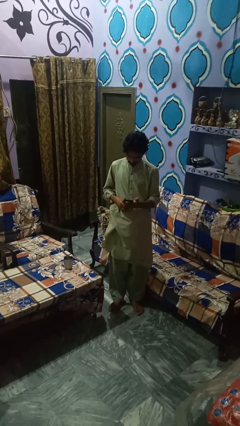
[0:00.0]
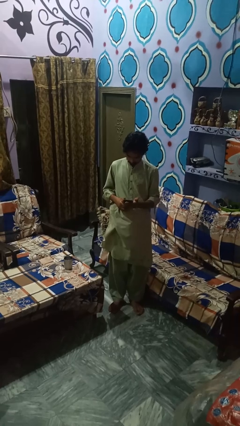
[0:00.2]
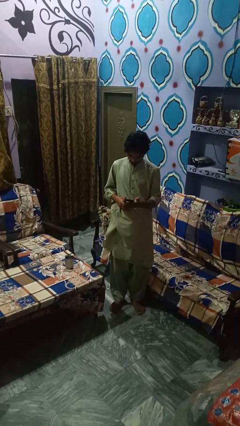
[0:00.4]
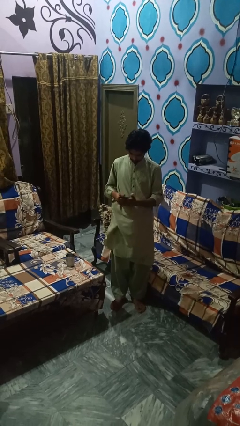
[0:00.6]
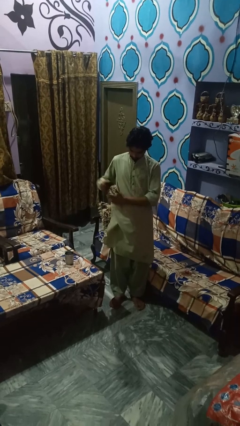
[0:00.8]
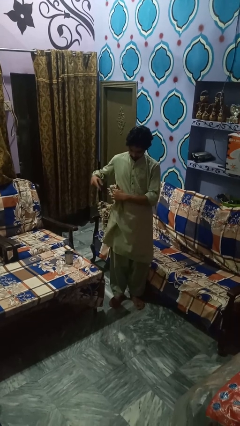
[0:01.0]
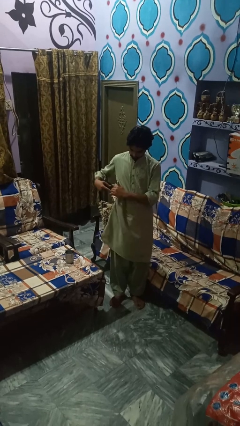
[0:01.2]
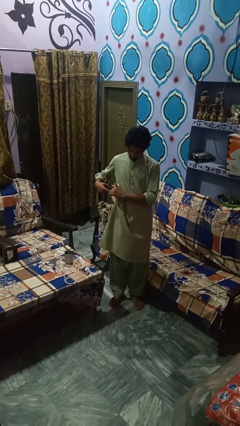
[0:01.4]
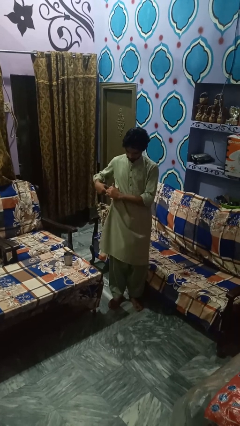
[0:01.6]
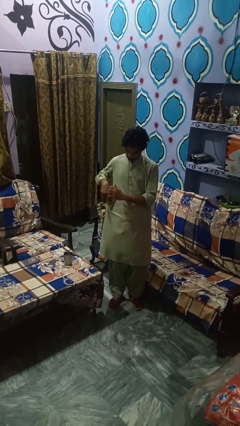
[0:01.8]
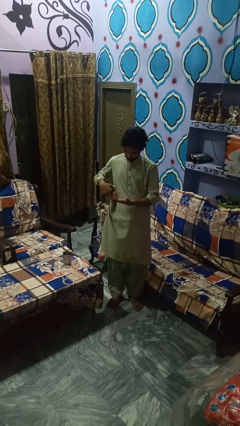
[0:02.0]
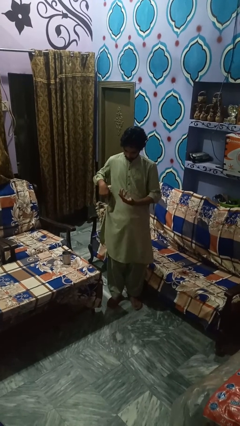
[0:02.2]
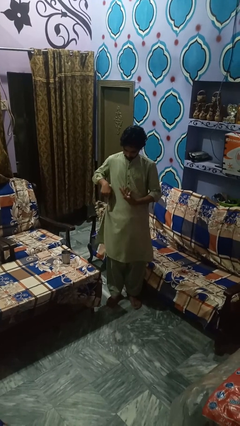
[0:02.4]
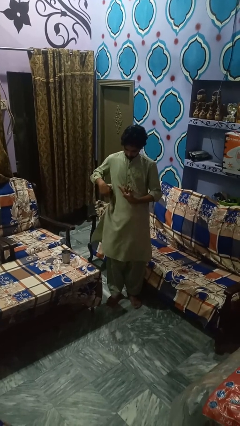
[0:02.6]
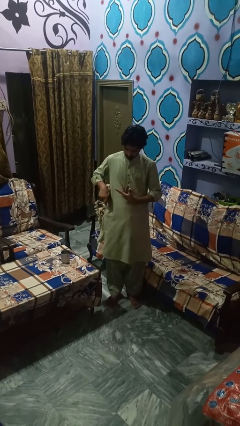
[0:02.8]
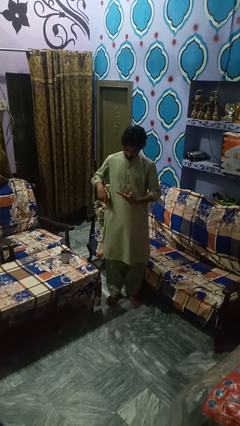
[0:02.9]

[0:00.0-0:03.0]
person puts phone into pocket

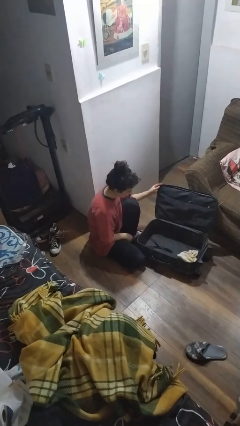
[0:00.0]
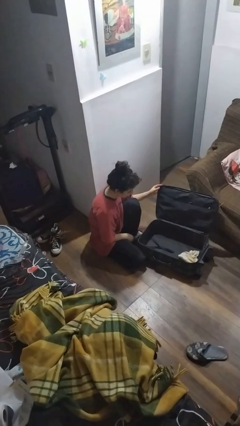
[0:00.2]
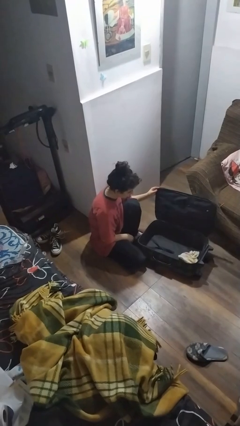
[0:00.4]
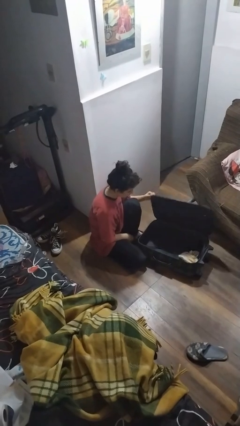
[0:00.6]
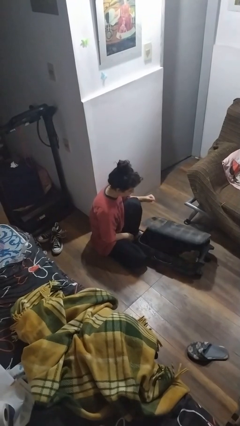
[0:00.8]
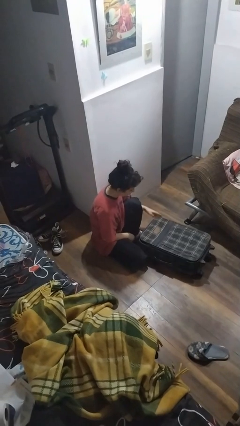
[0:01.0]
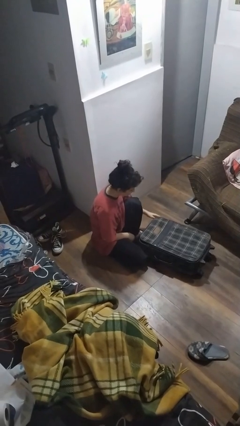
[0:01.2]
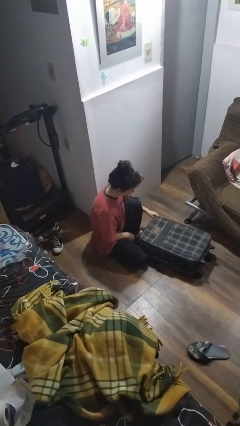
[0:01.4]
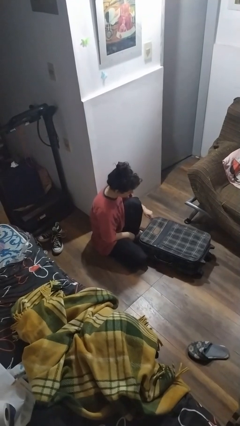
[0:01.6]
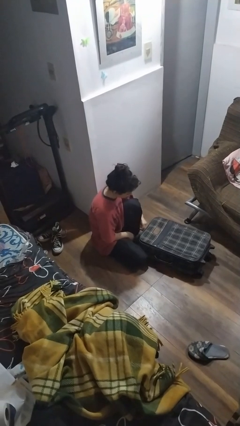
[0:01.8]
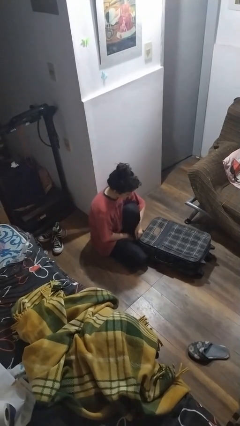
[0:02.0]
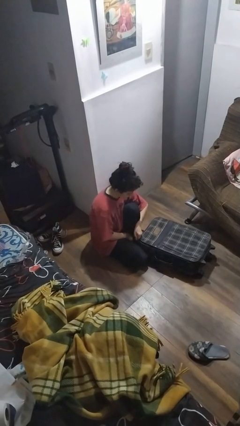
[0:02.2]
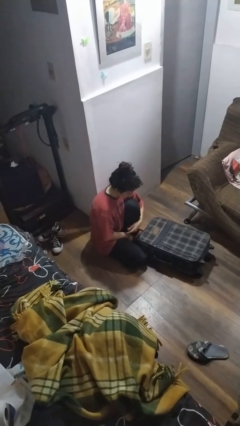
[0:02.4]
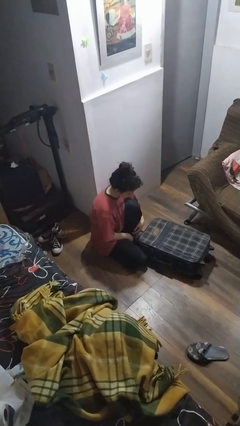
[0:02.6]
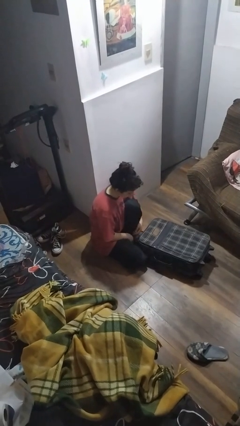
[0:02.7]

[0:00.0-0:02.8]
person closes suitcase

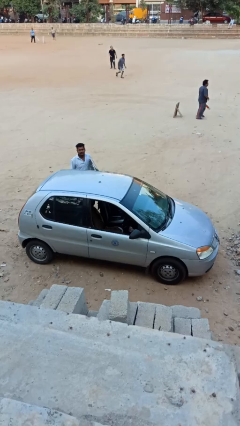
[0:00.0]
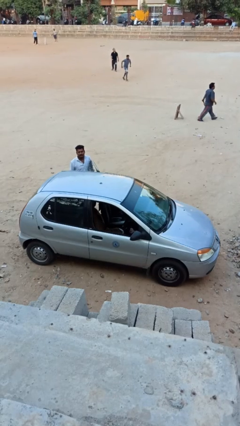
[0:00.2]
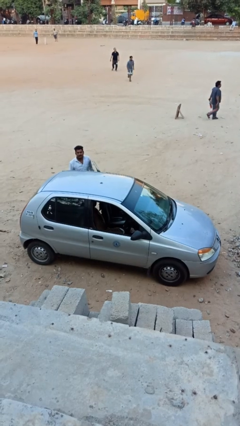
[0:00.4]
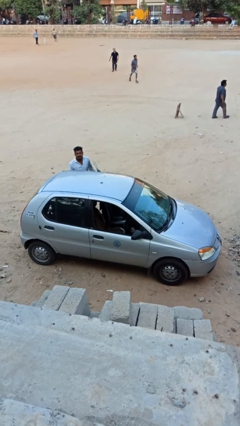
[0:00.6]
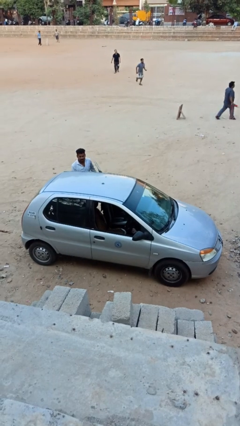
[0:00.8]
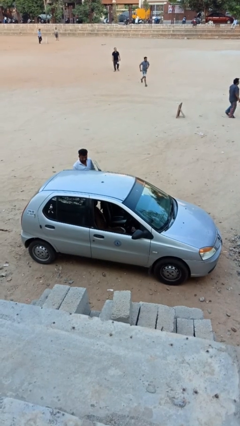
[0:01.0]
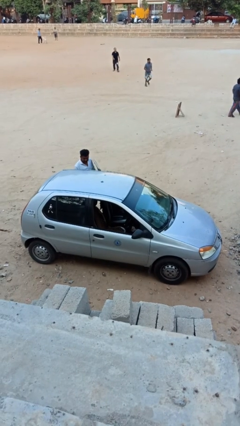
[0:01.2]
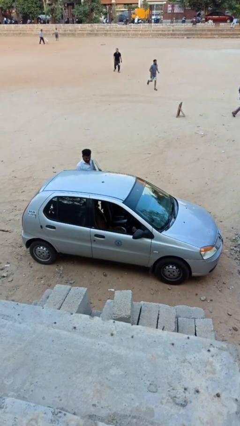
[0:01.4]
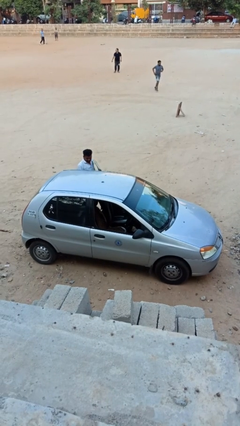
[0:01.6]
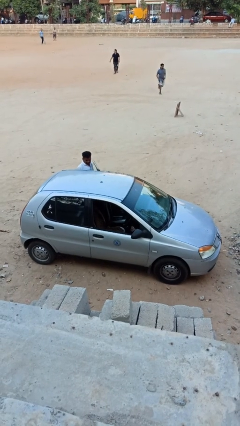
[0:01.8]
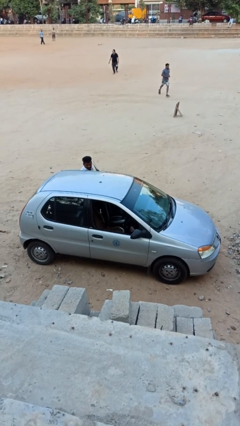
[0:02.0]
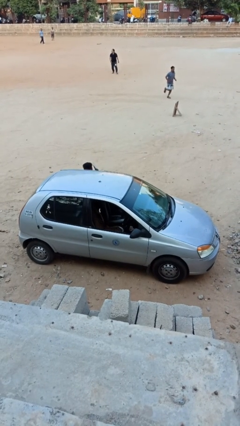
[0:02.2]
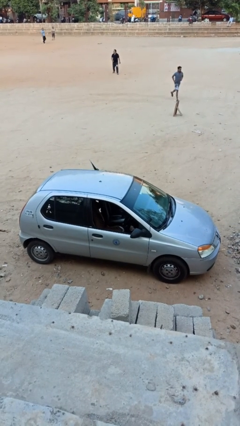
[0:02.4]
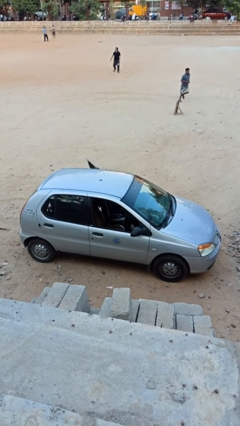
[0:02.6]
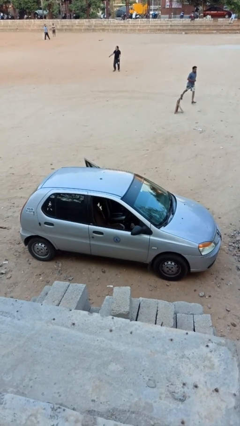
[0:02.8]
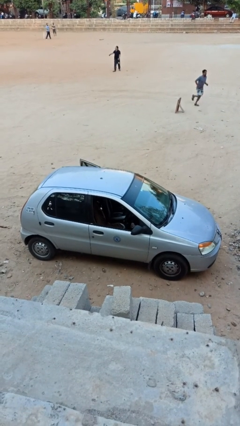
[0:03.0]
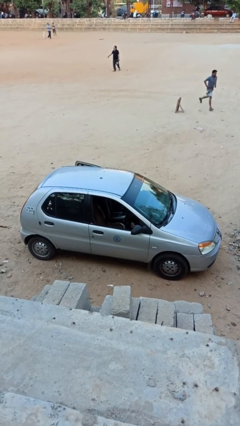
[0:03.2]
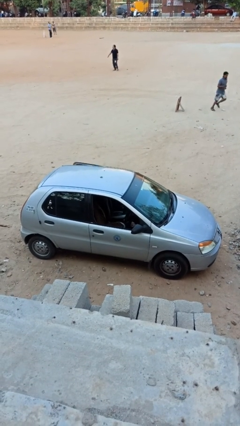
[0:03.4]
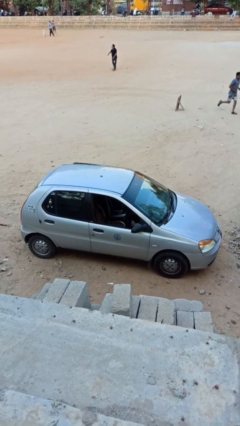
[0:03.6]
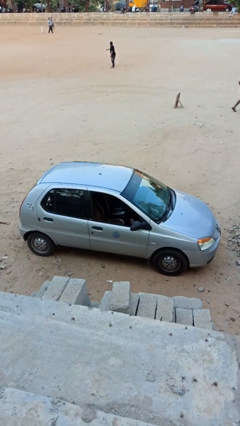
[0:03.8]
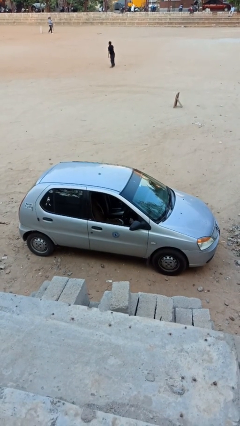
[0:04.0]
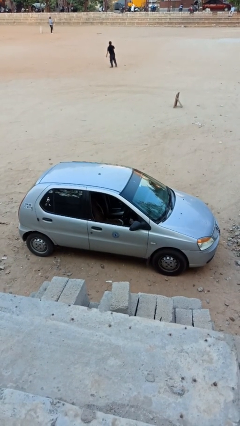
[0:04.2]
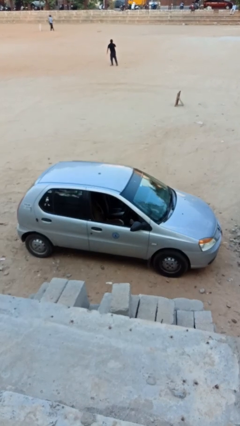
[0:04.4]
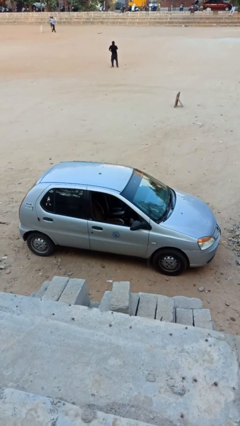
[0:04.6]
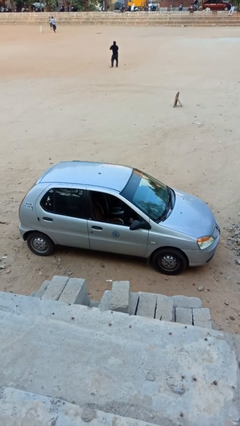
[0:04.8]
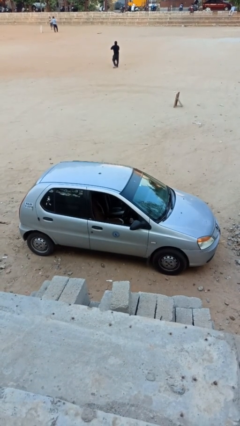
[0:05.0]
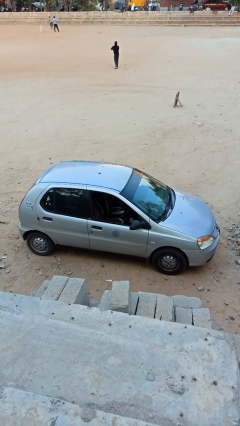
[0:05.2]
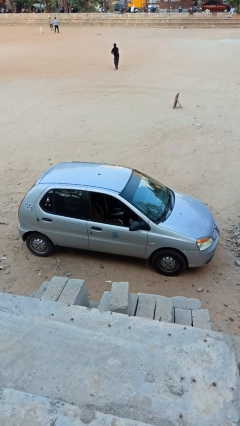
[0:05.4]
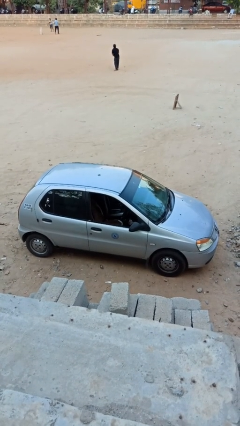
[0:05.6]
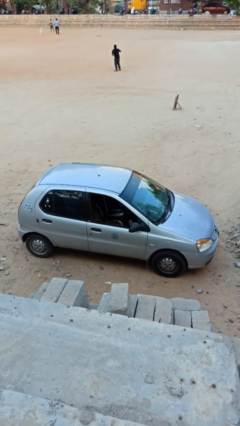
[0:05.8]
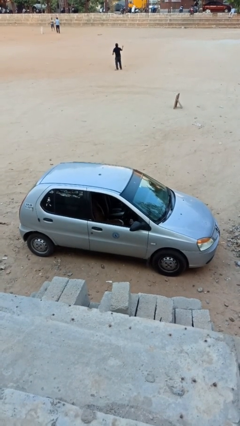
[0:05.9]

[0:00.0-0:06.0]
car picks up person

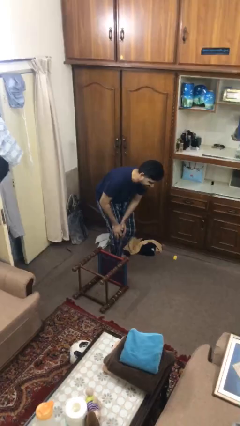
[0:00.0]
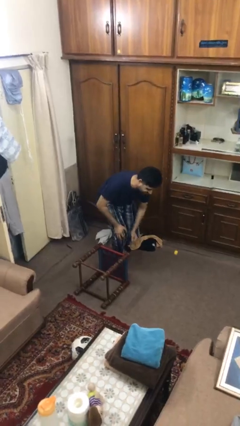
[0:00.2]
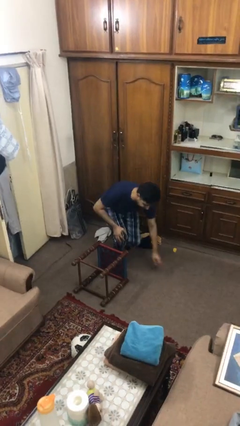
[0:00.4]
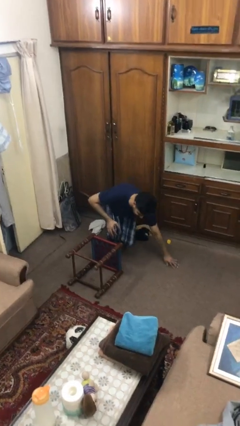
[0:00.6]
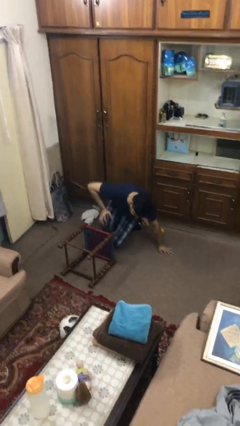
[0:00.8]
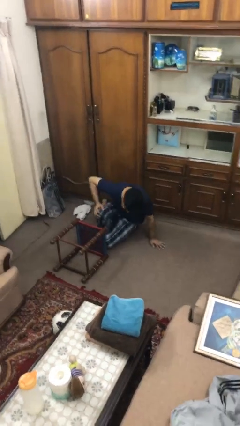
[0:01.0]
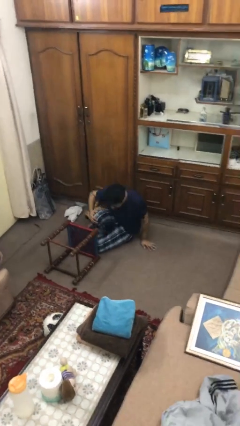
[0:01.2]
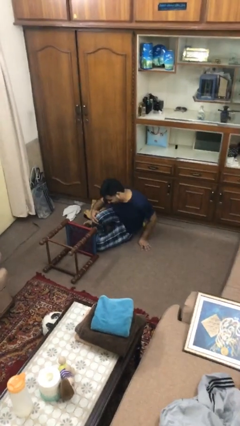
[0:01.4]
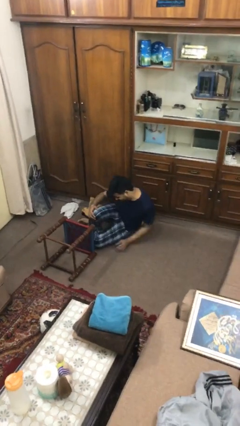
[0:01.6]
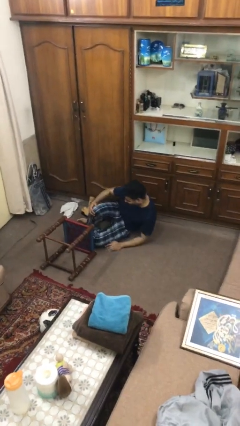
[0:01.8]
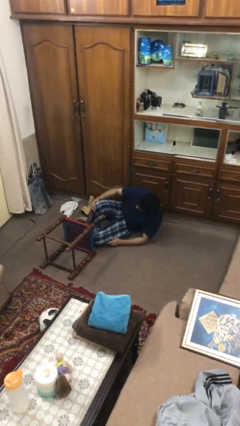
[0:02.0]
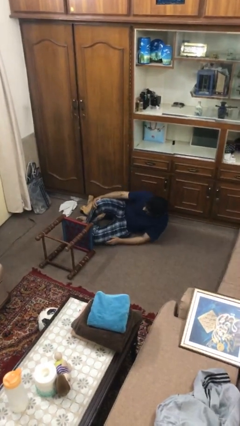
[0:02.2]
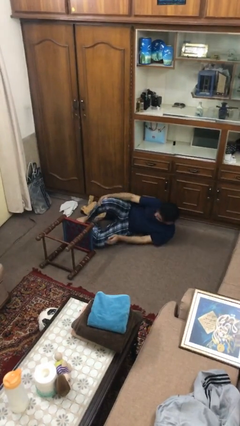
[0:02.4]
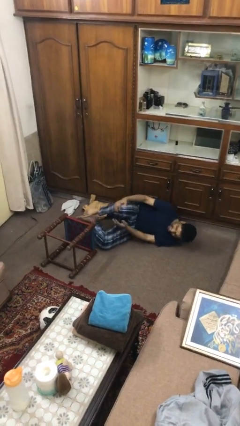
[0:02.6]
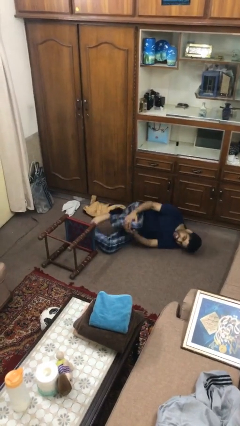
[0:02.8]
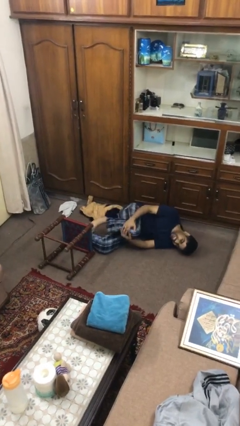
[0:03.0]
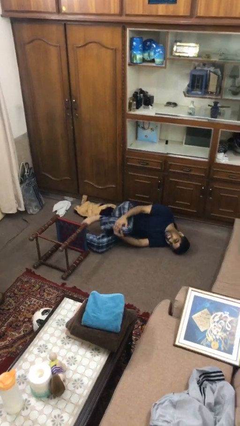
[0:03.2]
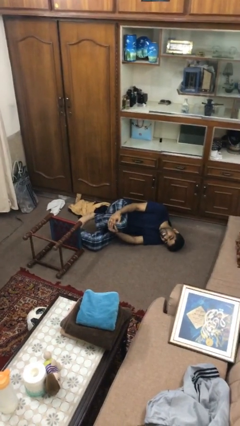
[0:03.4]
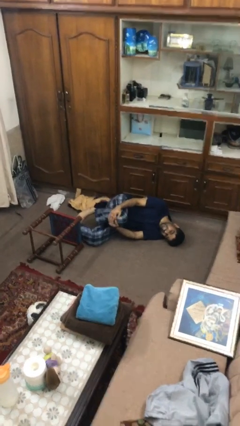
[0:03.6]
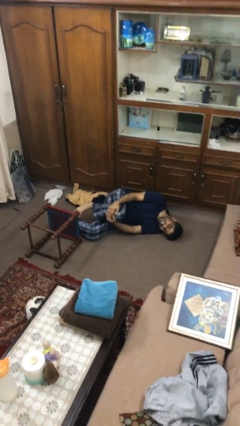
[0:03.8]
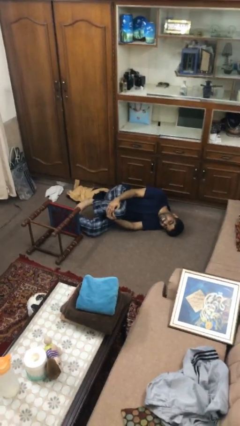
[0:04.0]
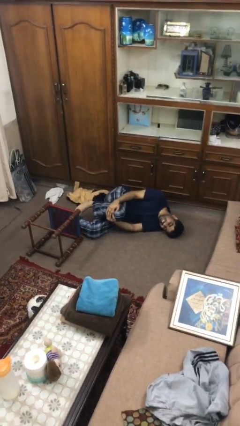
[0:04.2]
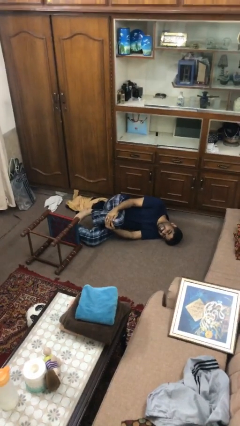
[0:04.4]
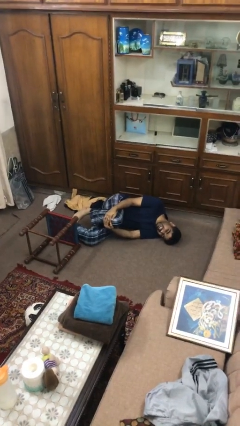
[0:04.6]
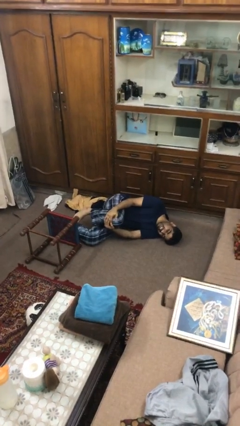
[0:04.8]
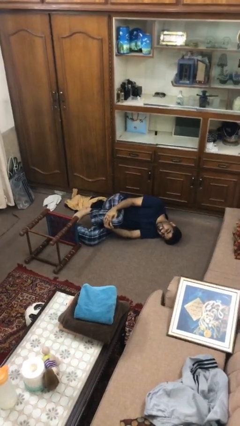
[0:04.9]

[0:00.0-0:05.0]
person lies down on floor

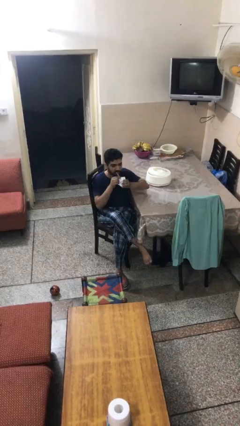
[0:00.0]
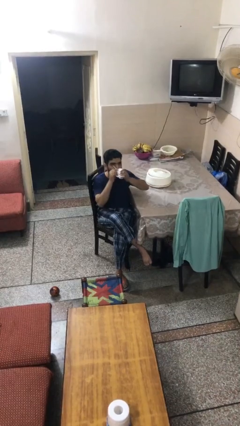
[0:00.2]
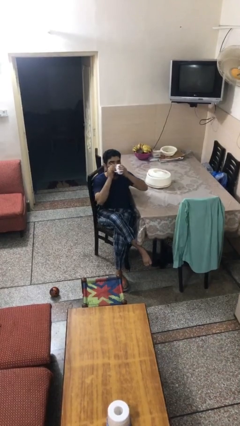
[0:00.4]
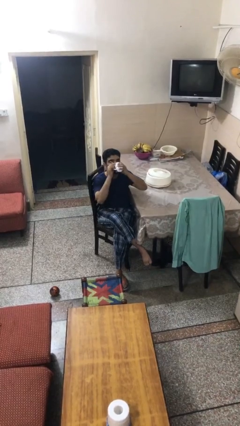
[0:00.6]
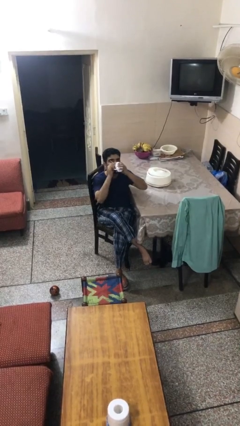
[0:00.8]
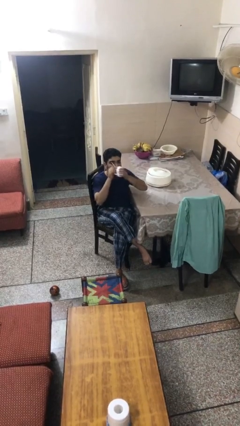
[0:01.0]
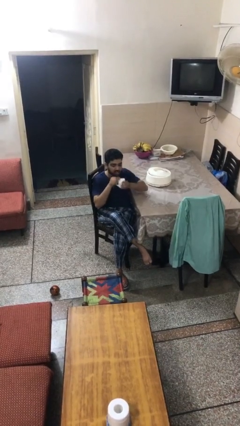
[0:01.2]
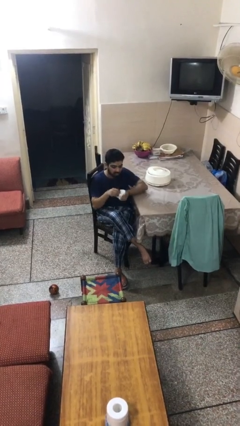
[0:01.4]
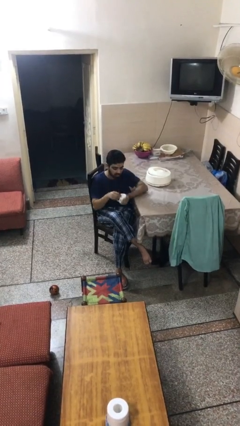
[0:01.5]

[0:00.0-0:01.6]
person drinks from mug
